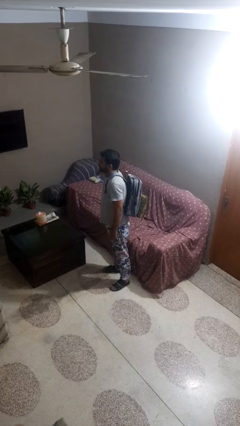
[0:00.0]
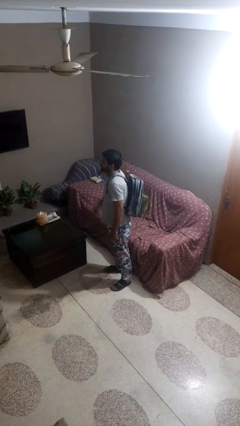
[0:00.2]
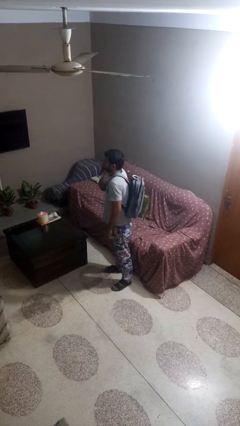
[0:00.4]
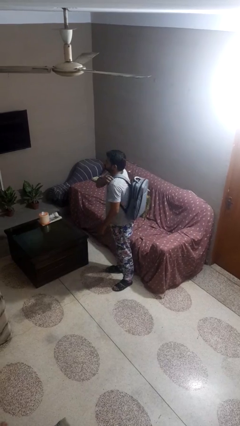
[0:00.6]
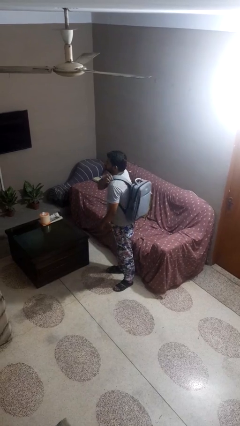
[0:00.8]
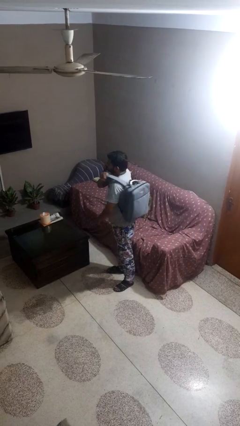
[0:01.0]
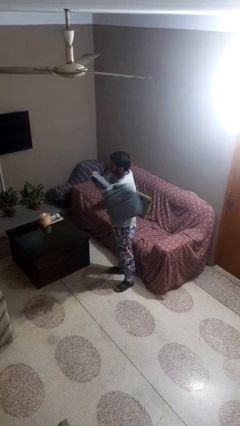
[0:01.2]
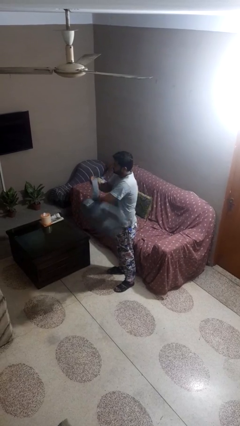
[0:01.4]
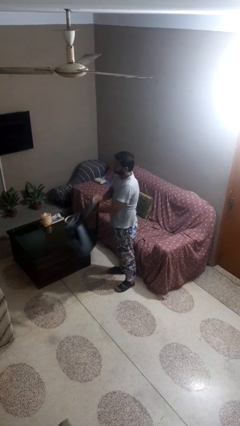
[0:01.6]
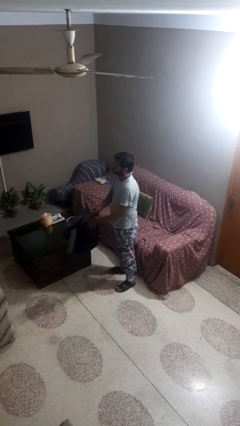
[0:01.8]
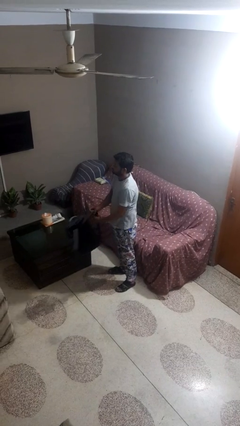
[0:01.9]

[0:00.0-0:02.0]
person takes off backpack

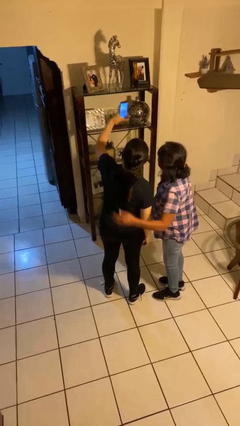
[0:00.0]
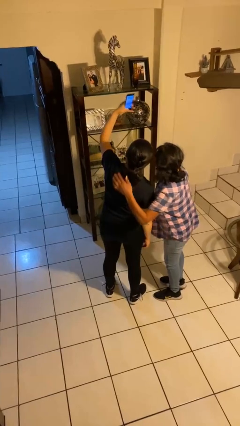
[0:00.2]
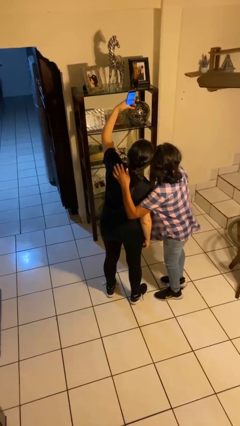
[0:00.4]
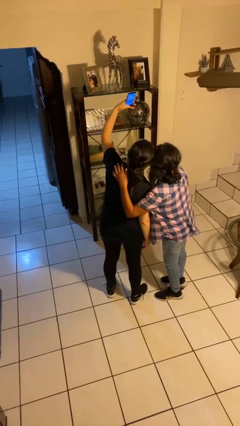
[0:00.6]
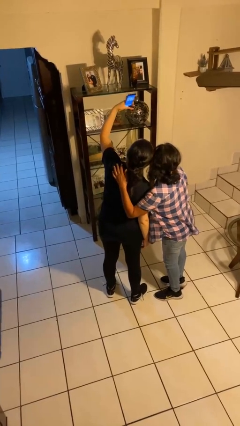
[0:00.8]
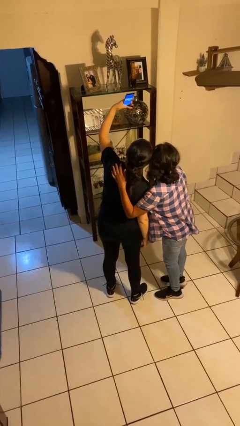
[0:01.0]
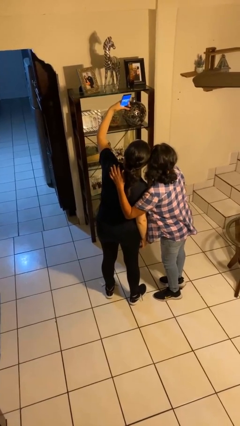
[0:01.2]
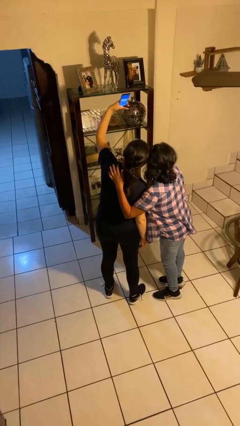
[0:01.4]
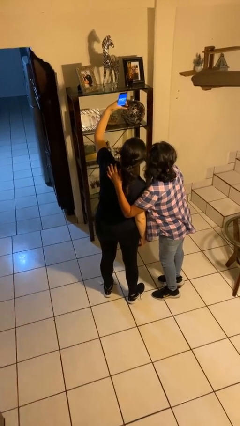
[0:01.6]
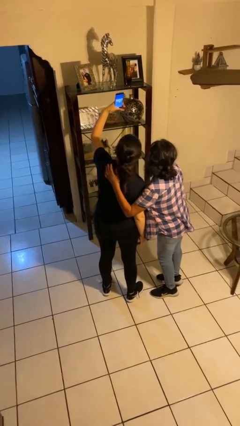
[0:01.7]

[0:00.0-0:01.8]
person takes selfie with person

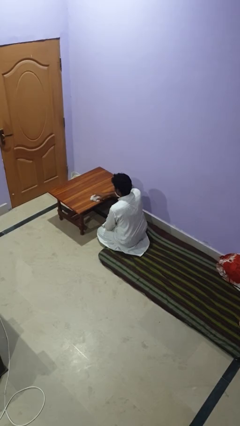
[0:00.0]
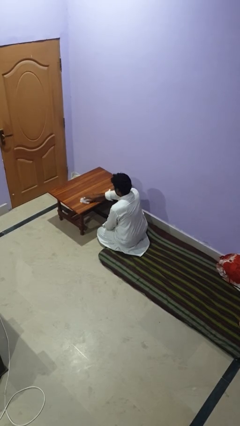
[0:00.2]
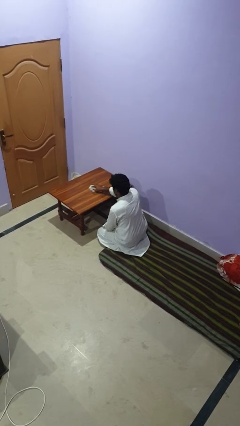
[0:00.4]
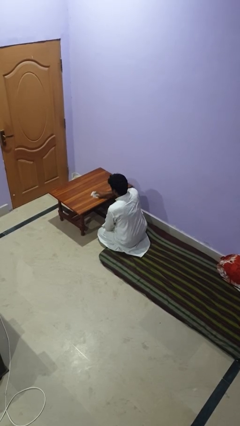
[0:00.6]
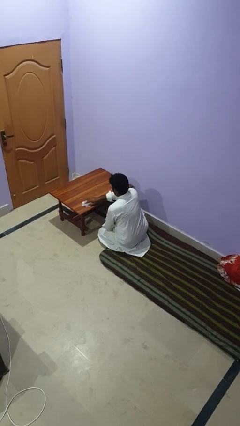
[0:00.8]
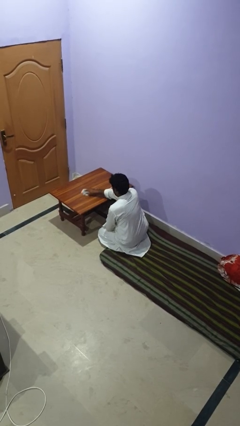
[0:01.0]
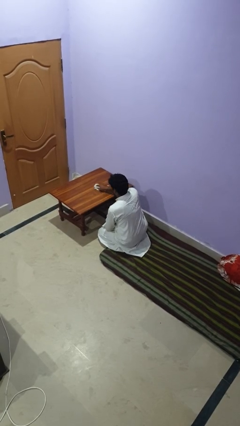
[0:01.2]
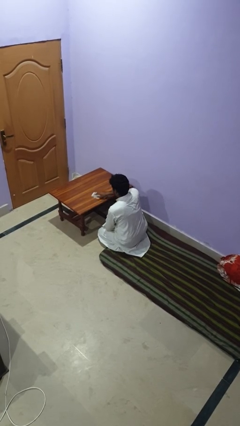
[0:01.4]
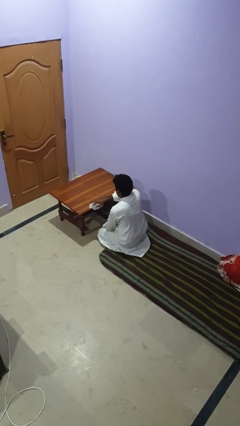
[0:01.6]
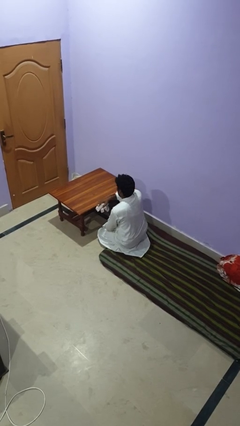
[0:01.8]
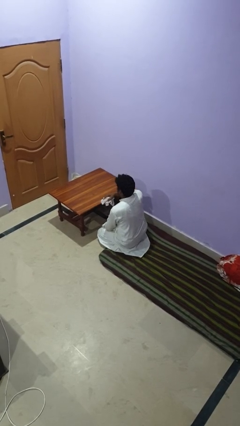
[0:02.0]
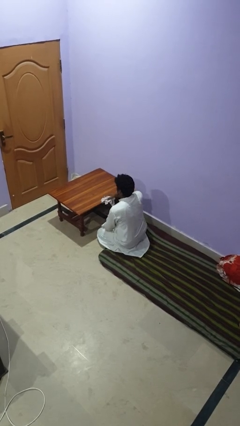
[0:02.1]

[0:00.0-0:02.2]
person cleans table with rag

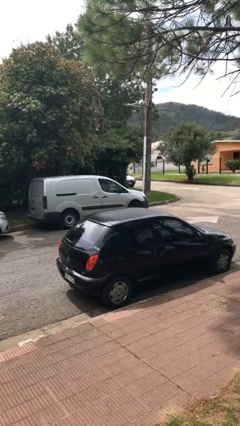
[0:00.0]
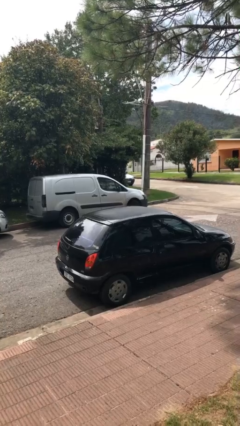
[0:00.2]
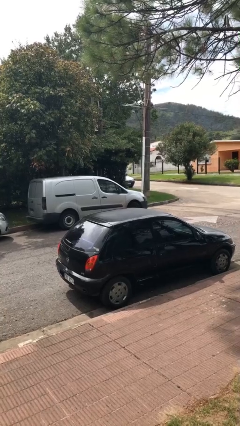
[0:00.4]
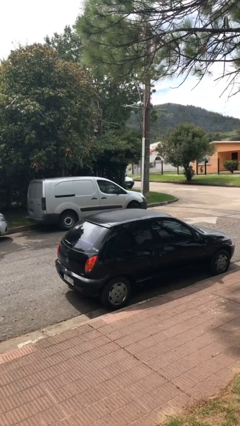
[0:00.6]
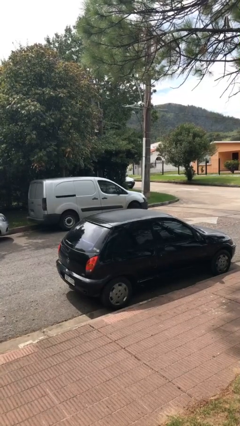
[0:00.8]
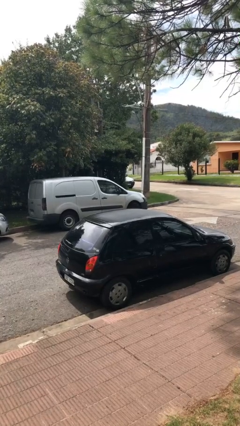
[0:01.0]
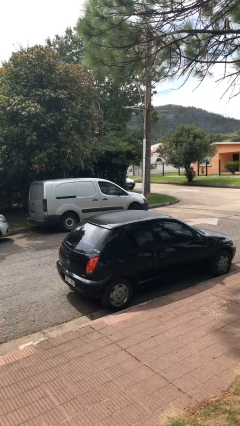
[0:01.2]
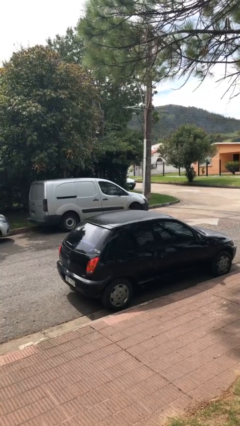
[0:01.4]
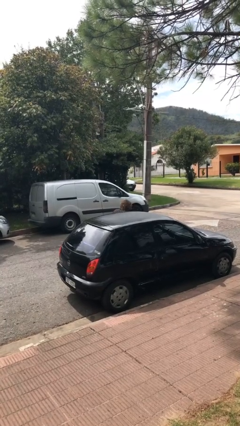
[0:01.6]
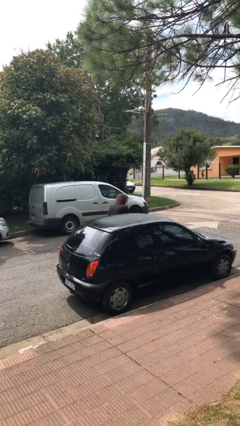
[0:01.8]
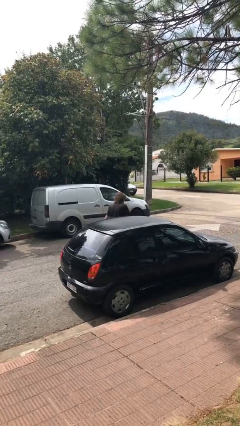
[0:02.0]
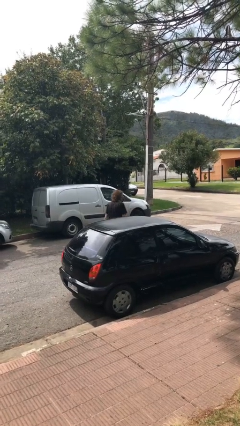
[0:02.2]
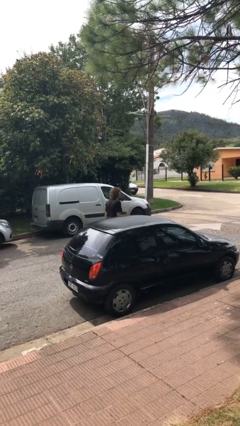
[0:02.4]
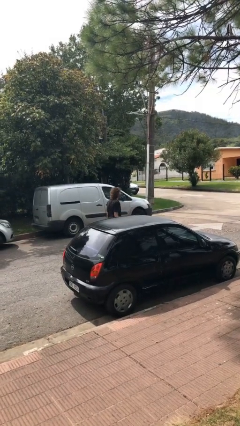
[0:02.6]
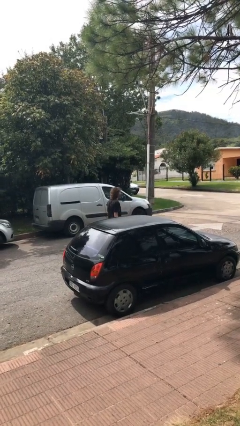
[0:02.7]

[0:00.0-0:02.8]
person exits car

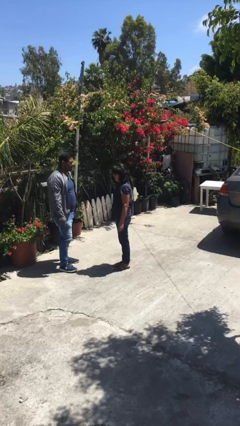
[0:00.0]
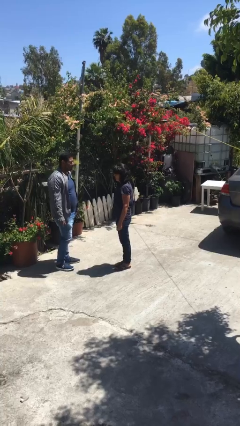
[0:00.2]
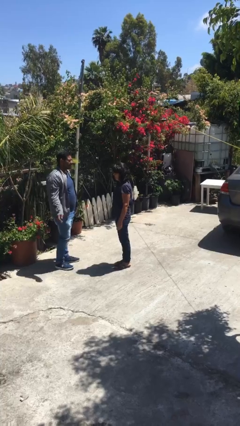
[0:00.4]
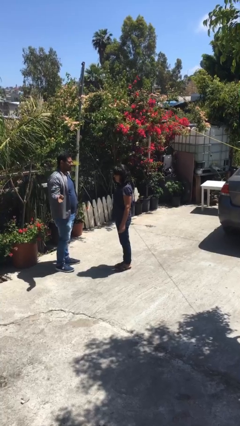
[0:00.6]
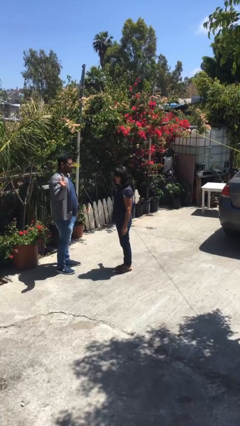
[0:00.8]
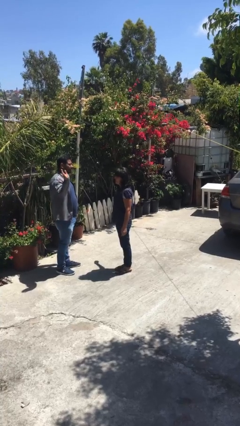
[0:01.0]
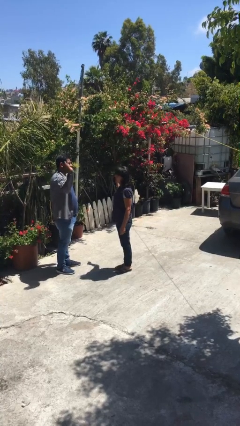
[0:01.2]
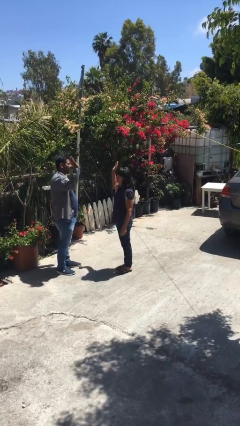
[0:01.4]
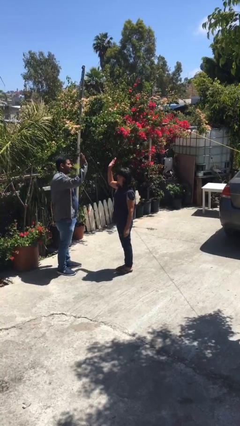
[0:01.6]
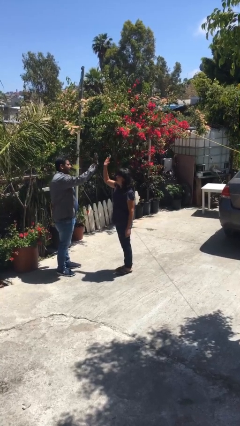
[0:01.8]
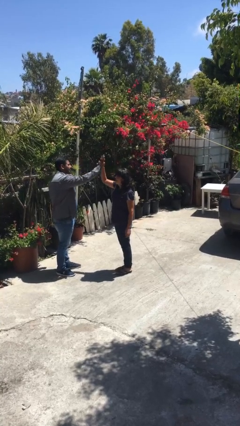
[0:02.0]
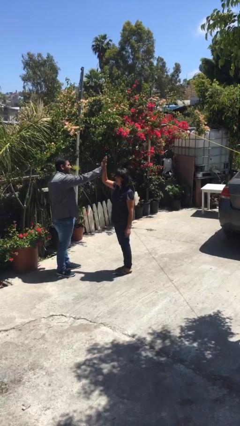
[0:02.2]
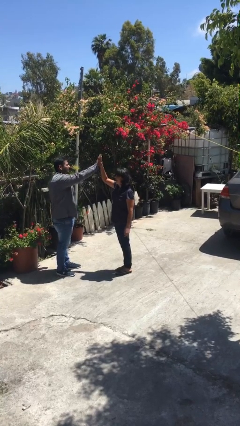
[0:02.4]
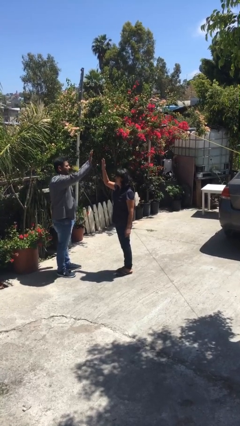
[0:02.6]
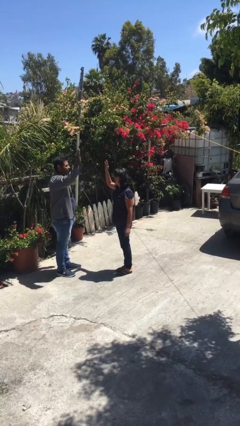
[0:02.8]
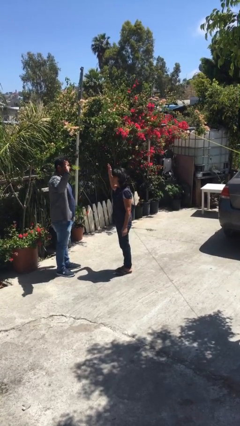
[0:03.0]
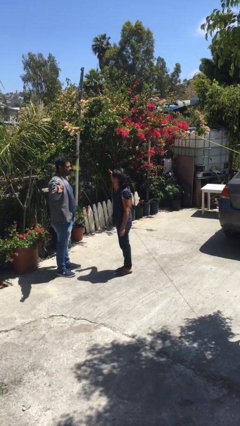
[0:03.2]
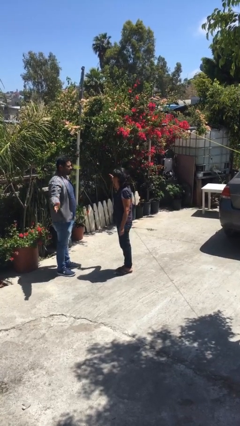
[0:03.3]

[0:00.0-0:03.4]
person highfives hand

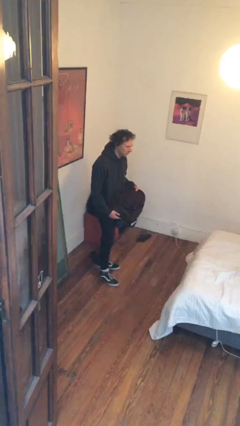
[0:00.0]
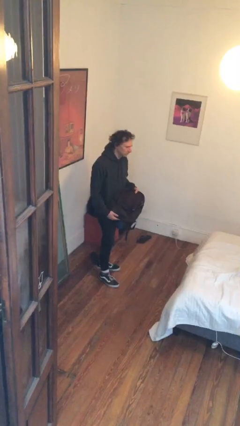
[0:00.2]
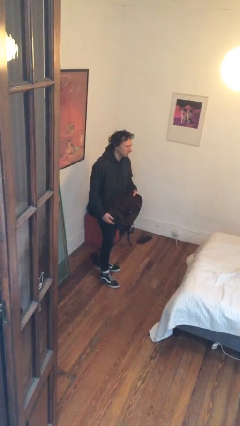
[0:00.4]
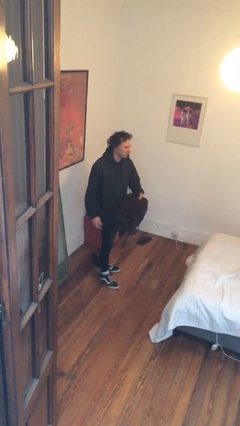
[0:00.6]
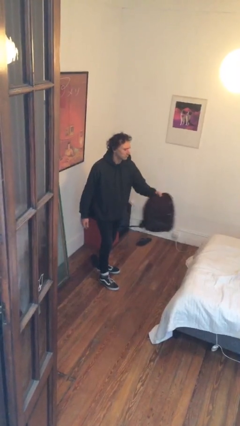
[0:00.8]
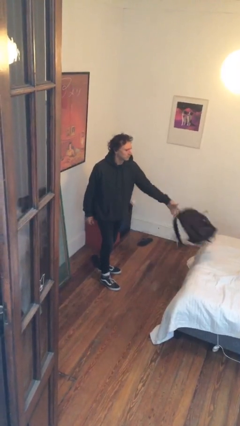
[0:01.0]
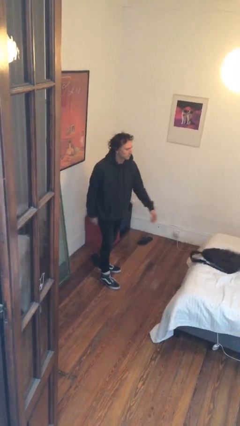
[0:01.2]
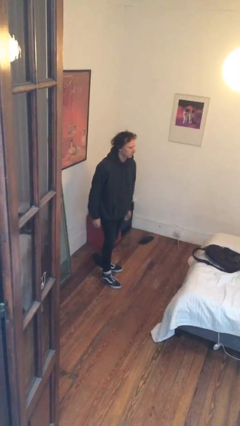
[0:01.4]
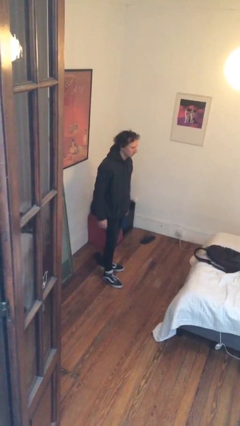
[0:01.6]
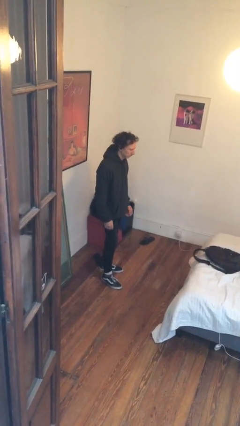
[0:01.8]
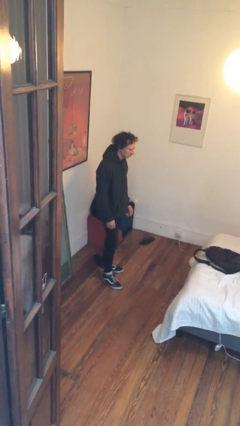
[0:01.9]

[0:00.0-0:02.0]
person throws object on bed

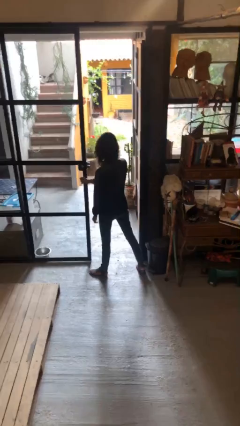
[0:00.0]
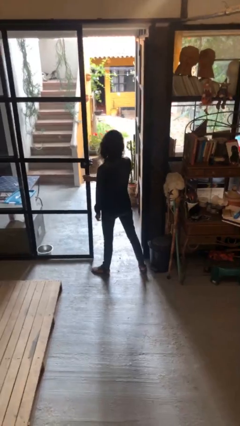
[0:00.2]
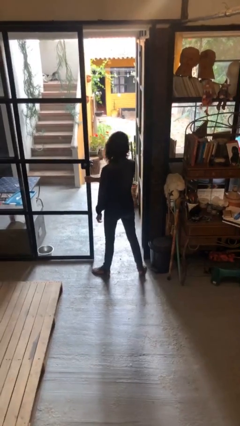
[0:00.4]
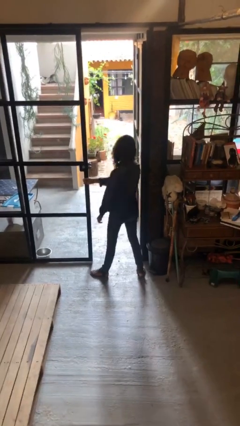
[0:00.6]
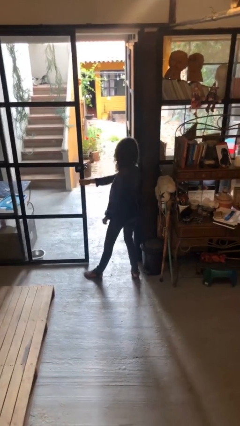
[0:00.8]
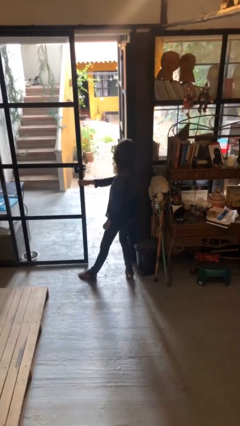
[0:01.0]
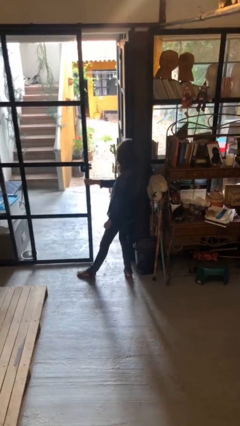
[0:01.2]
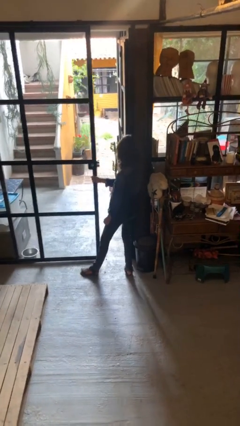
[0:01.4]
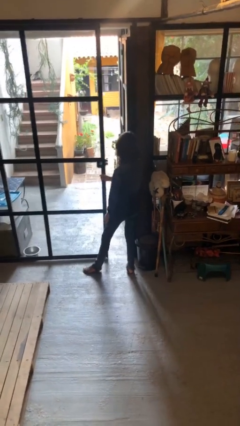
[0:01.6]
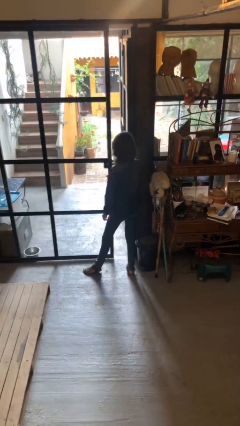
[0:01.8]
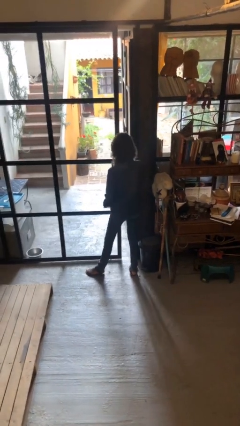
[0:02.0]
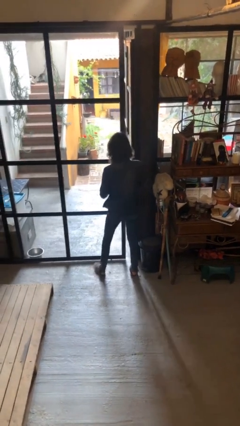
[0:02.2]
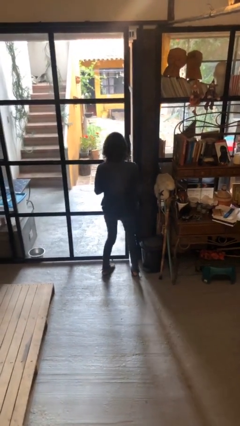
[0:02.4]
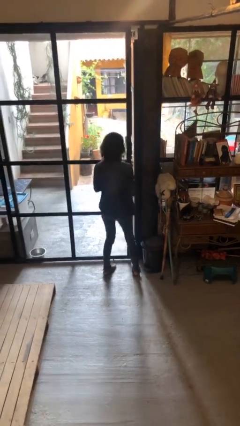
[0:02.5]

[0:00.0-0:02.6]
person closes sliding door
